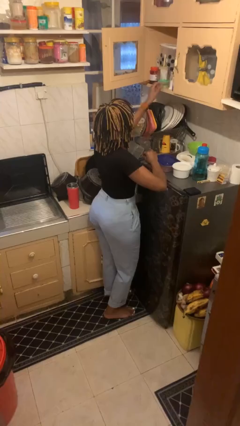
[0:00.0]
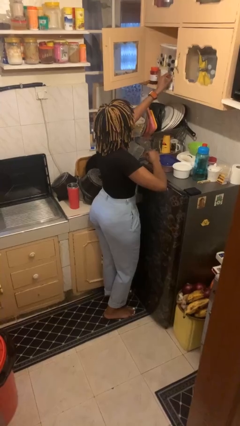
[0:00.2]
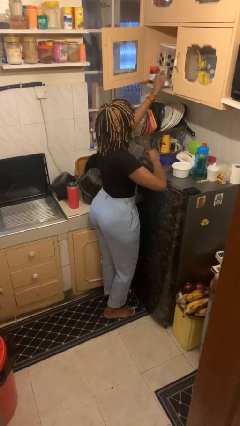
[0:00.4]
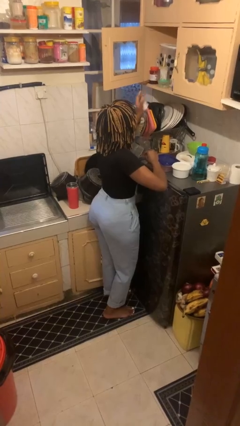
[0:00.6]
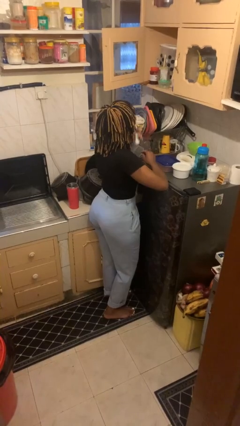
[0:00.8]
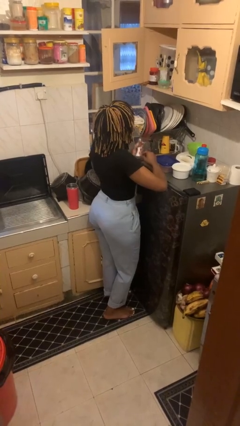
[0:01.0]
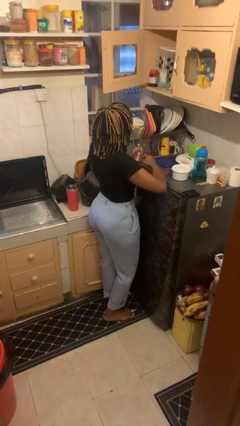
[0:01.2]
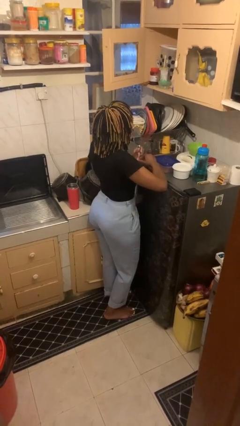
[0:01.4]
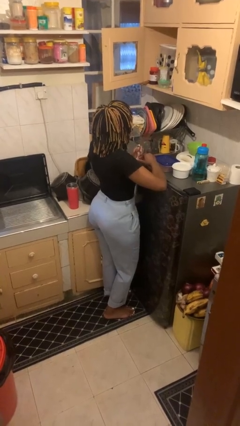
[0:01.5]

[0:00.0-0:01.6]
person takes object from cabinet

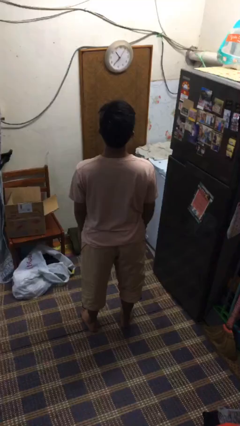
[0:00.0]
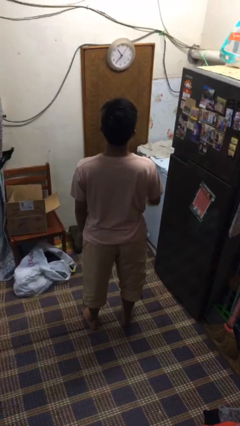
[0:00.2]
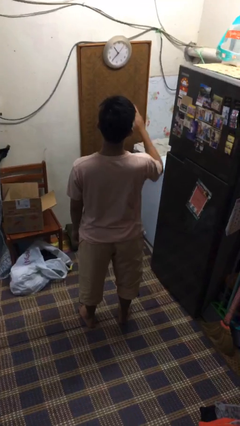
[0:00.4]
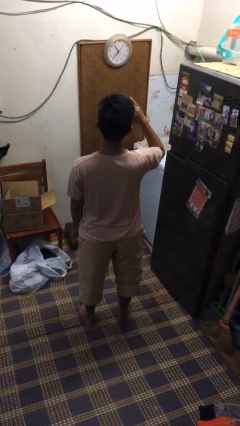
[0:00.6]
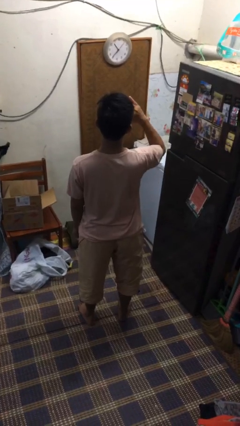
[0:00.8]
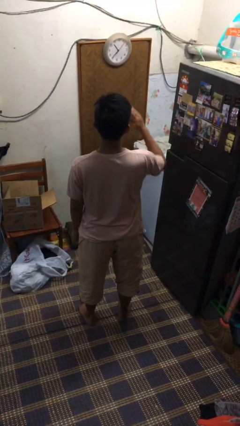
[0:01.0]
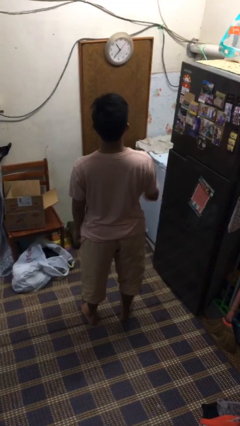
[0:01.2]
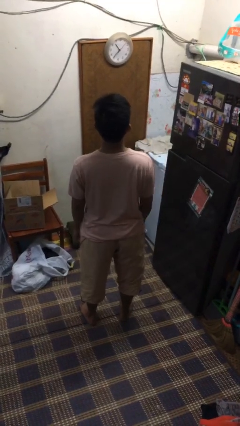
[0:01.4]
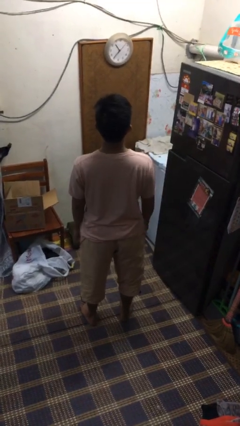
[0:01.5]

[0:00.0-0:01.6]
person salutes

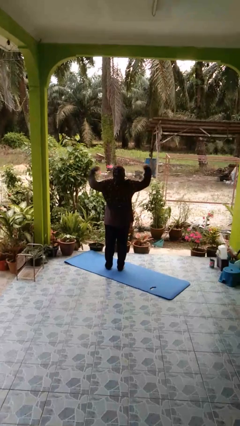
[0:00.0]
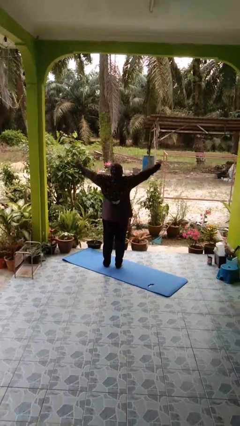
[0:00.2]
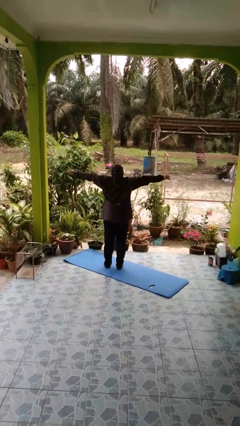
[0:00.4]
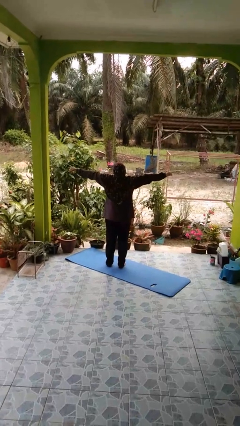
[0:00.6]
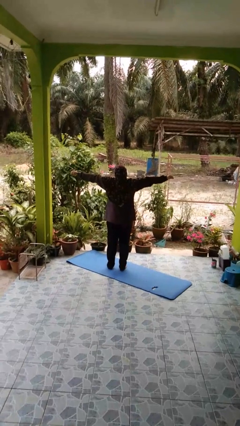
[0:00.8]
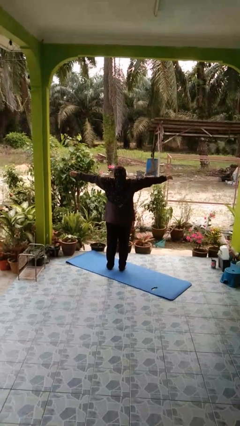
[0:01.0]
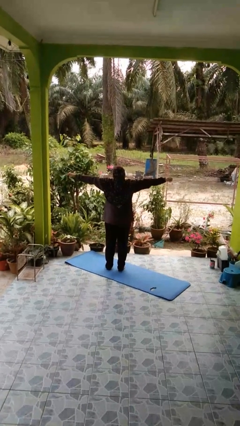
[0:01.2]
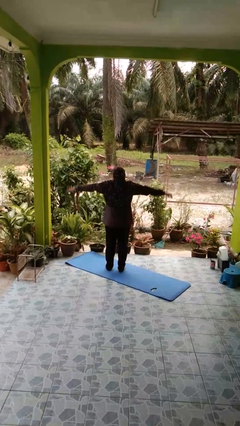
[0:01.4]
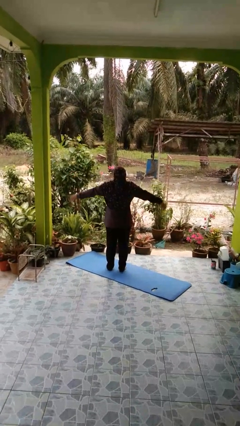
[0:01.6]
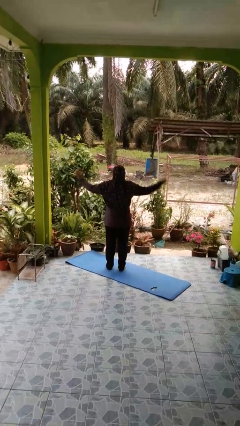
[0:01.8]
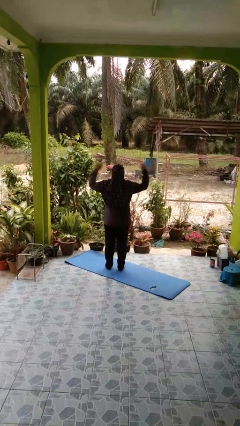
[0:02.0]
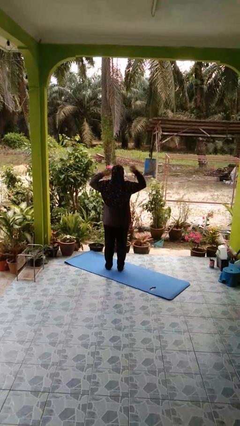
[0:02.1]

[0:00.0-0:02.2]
person stretches arms to side

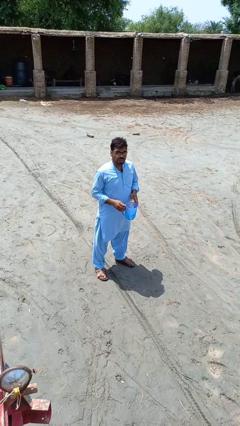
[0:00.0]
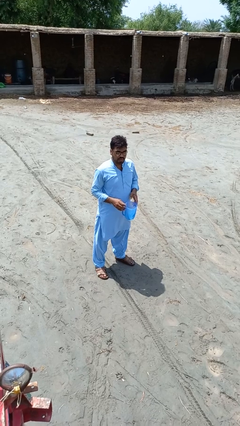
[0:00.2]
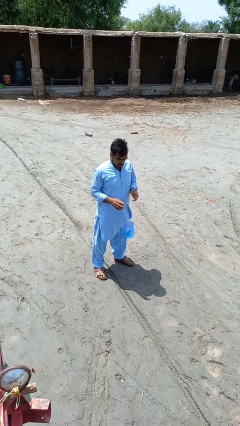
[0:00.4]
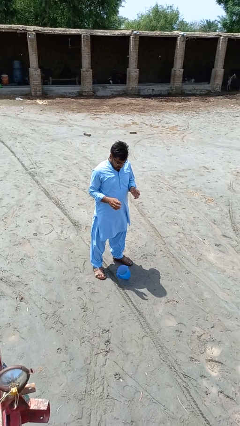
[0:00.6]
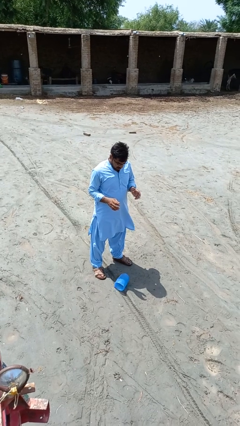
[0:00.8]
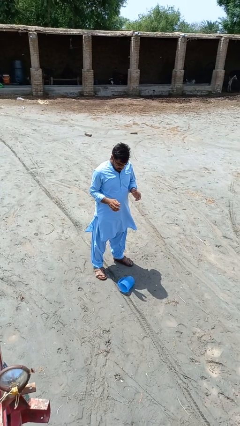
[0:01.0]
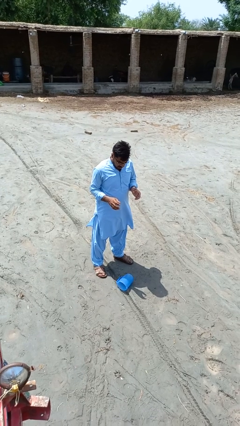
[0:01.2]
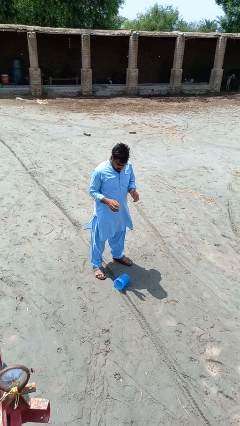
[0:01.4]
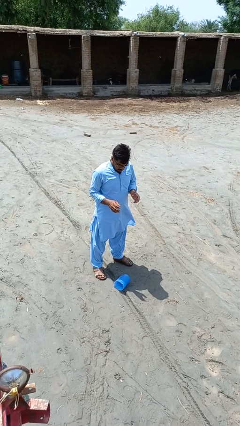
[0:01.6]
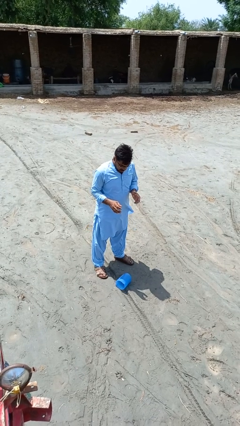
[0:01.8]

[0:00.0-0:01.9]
person drops object

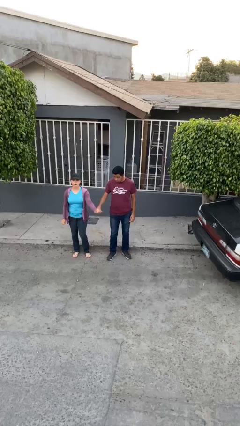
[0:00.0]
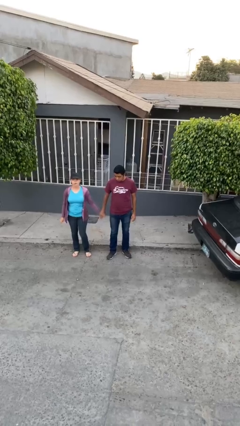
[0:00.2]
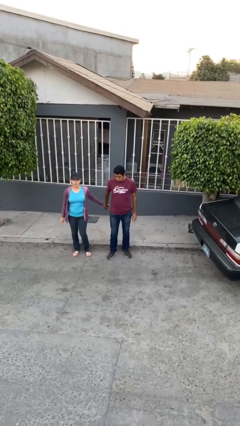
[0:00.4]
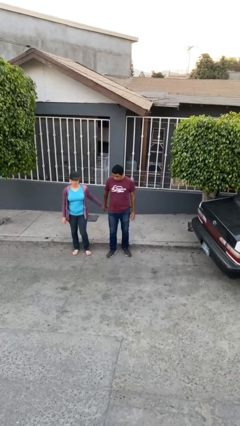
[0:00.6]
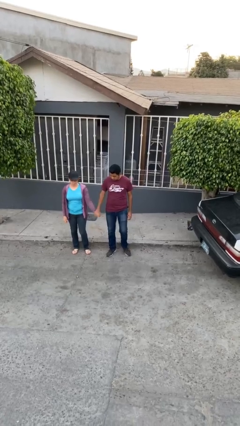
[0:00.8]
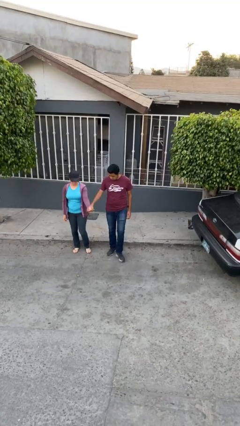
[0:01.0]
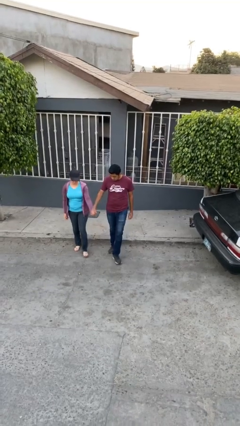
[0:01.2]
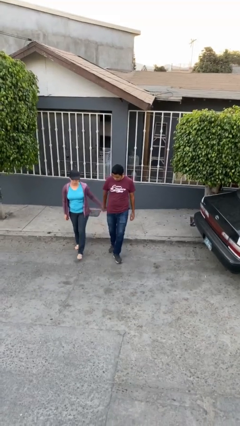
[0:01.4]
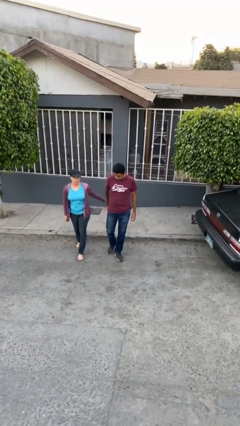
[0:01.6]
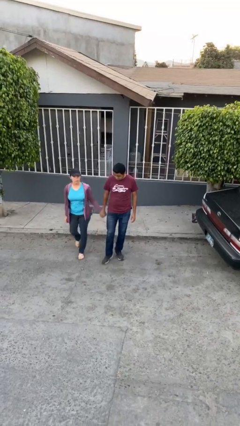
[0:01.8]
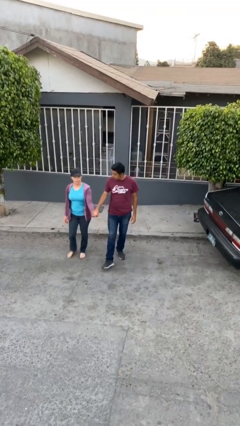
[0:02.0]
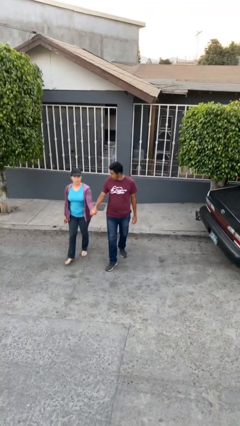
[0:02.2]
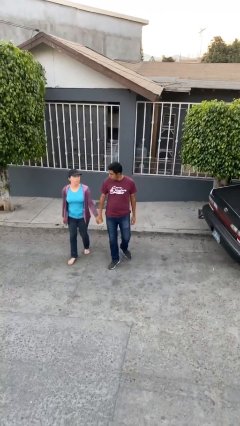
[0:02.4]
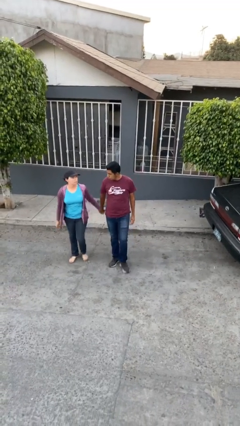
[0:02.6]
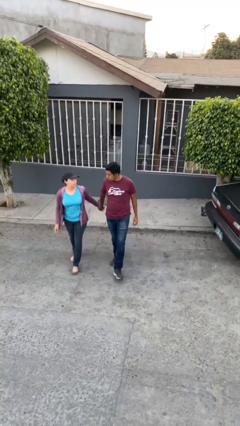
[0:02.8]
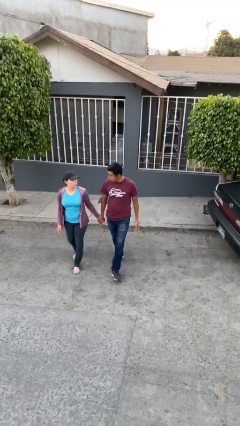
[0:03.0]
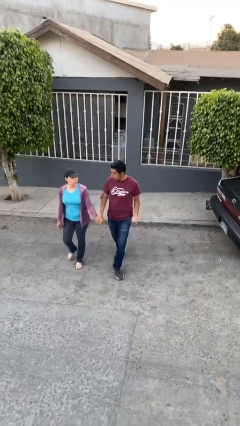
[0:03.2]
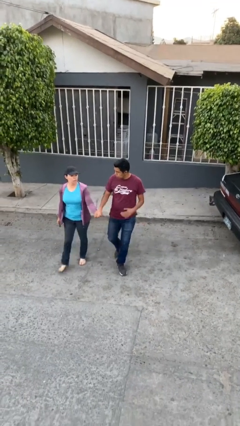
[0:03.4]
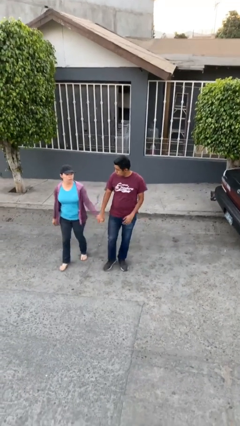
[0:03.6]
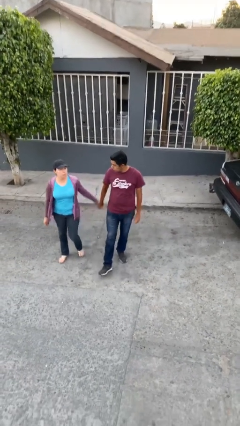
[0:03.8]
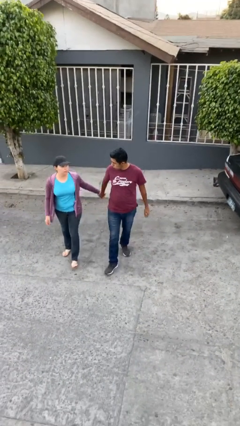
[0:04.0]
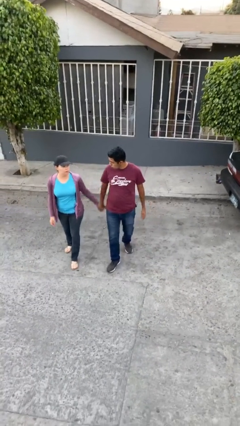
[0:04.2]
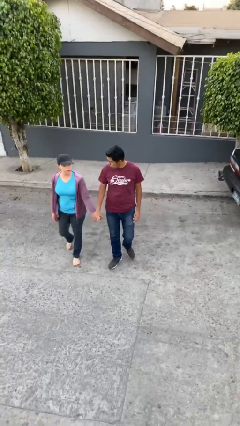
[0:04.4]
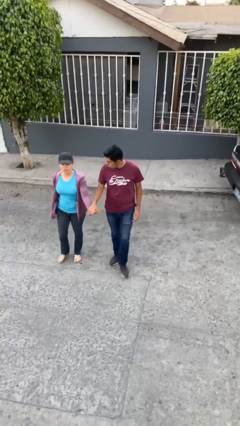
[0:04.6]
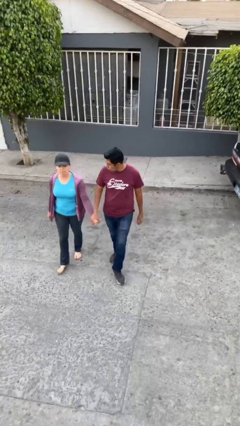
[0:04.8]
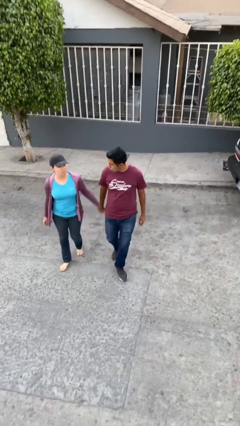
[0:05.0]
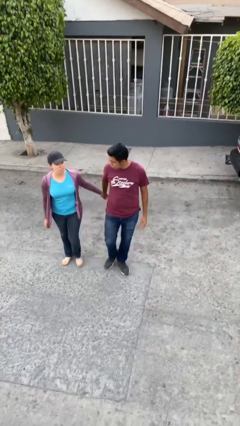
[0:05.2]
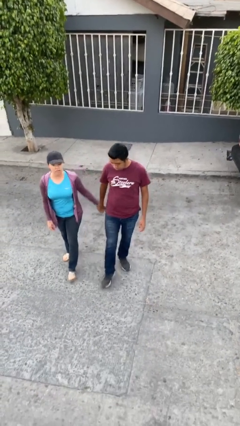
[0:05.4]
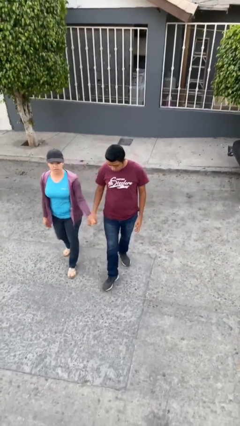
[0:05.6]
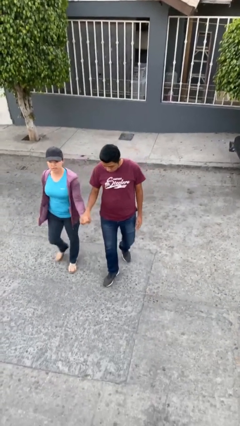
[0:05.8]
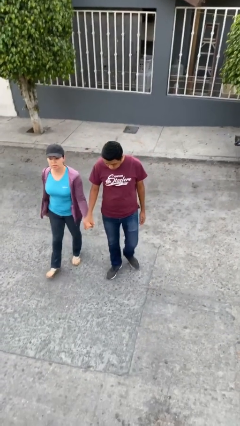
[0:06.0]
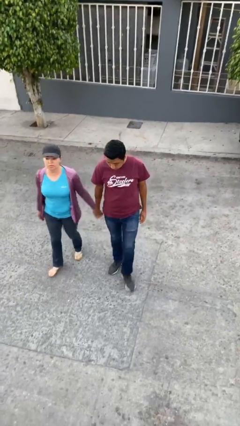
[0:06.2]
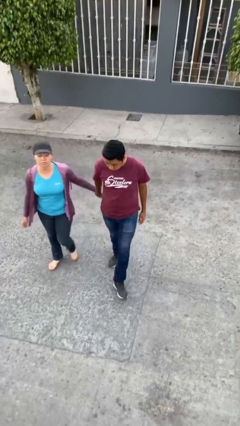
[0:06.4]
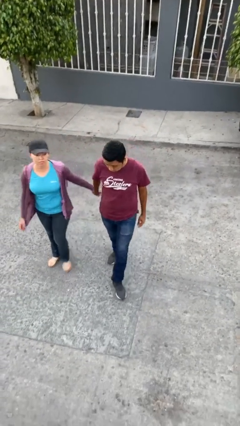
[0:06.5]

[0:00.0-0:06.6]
person holds hand

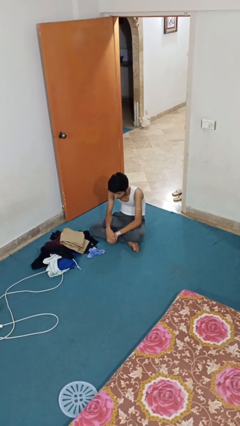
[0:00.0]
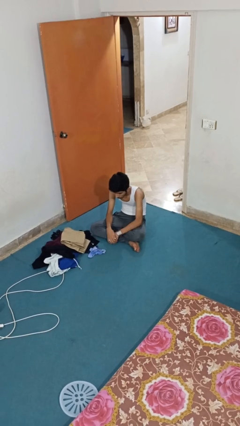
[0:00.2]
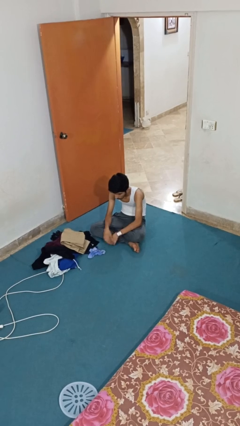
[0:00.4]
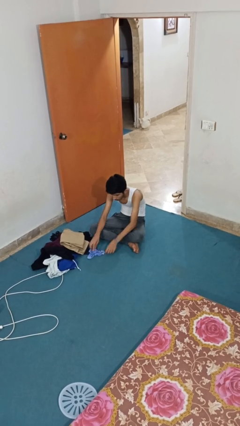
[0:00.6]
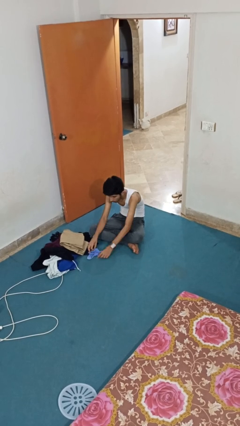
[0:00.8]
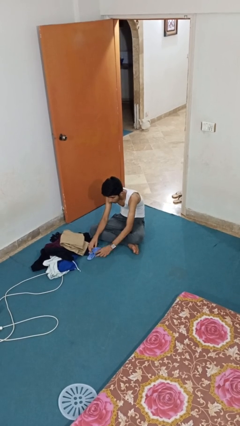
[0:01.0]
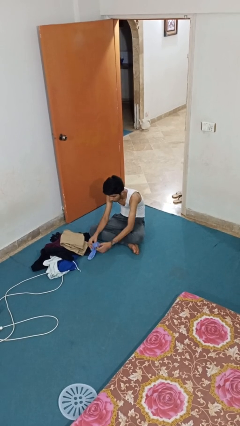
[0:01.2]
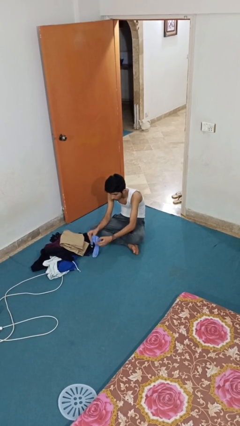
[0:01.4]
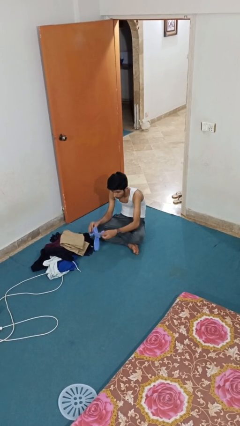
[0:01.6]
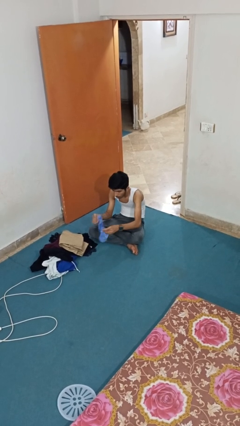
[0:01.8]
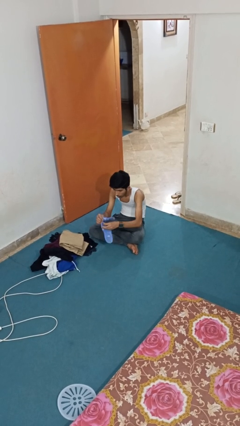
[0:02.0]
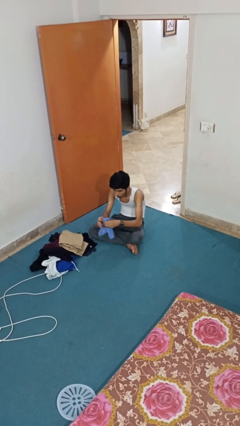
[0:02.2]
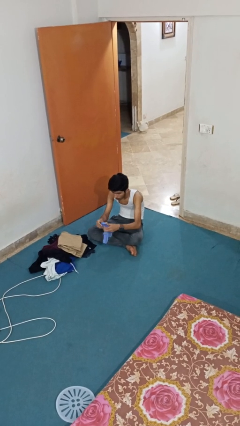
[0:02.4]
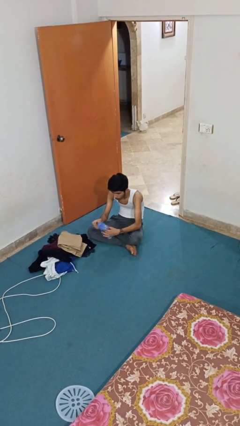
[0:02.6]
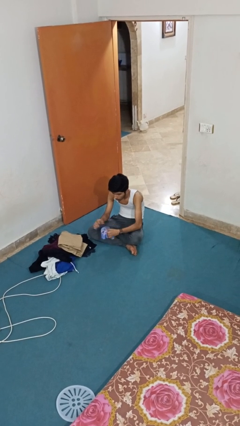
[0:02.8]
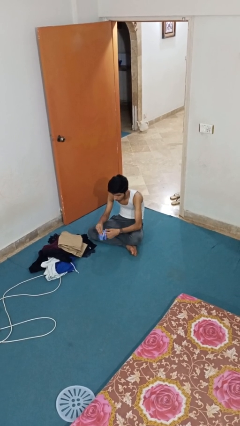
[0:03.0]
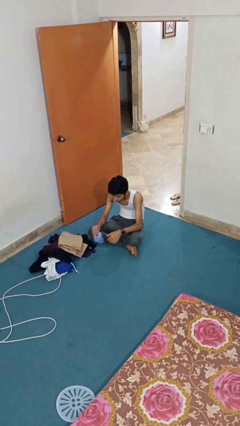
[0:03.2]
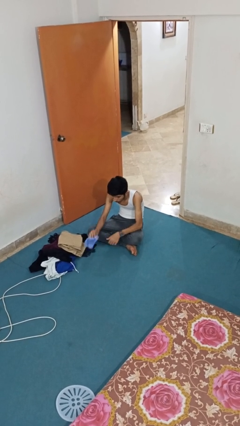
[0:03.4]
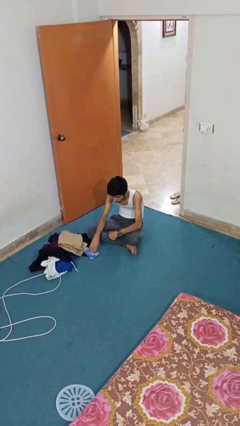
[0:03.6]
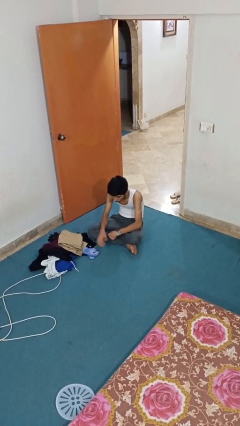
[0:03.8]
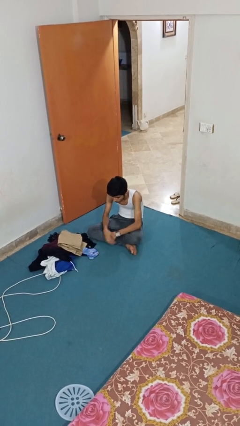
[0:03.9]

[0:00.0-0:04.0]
person folds socks
